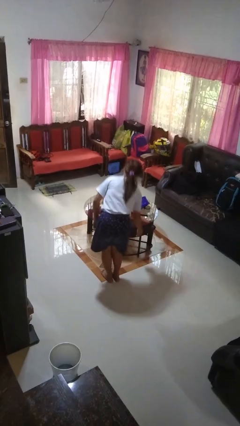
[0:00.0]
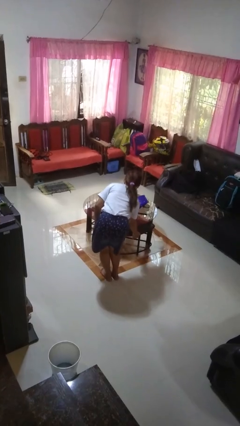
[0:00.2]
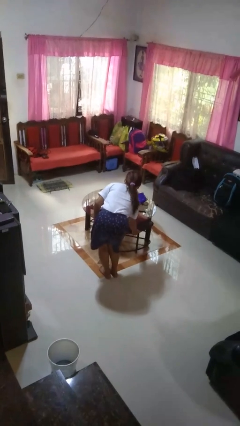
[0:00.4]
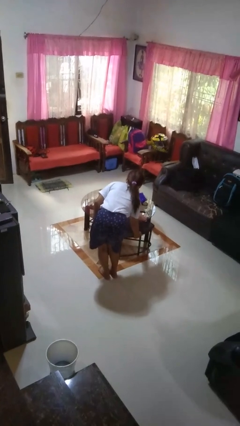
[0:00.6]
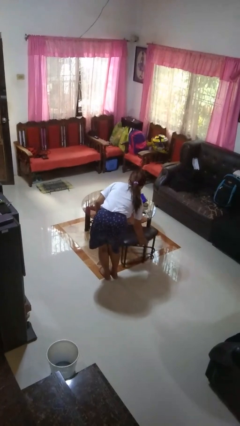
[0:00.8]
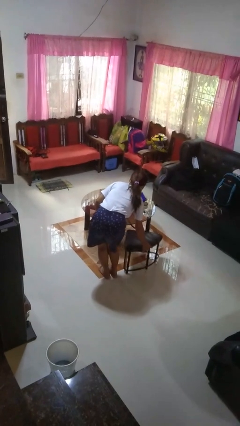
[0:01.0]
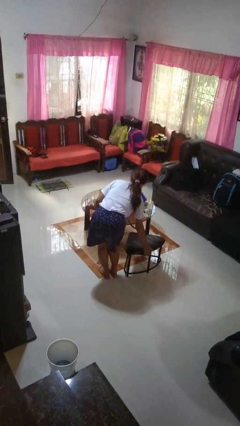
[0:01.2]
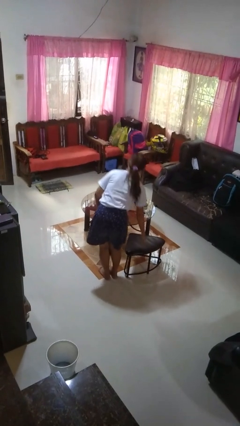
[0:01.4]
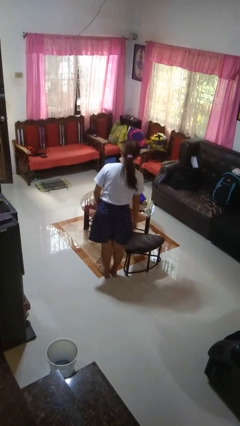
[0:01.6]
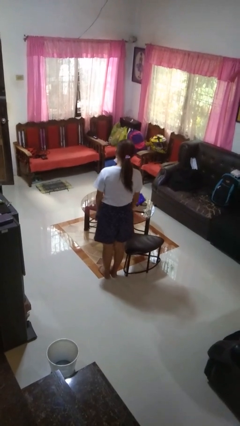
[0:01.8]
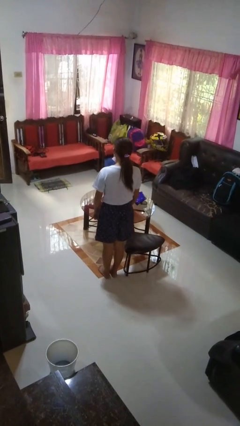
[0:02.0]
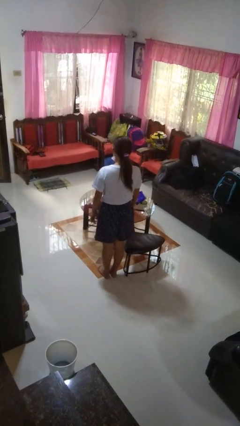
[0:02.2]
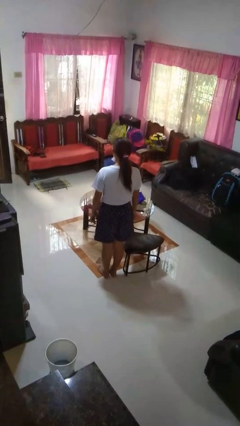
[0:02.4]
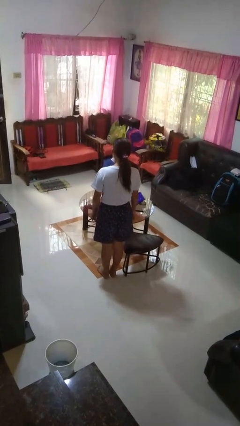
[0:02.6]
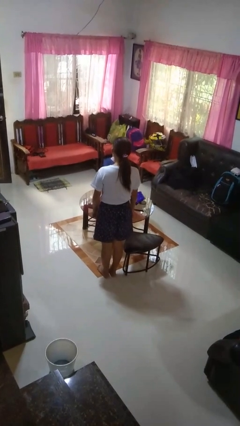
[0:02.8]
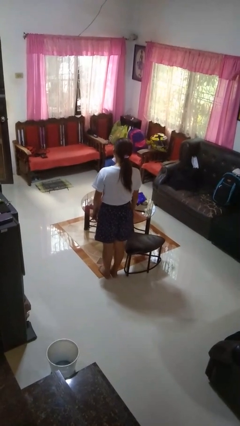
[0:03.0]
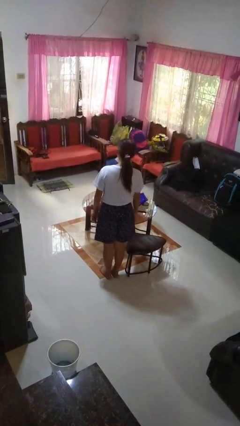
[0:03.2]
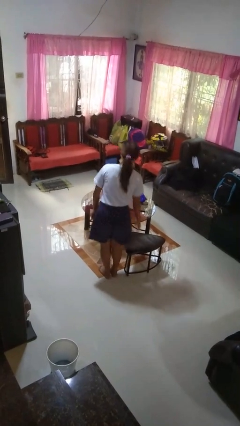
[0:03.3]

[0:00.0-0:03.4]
person pulls out chair

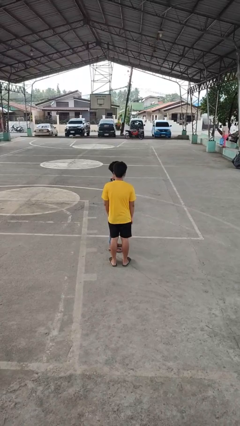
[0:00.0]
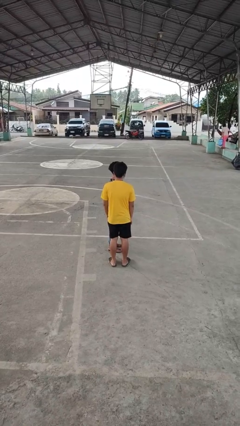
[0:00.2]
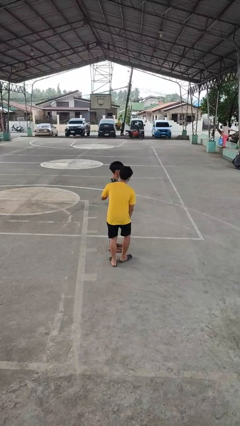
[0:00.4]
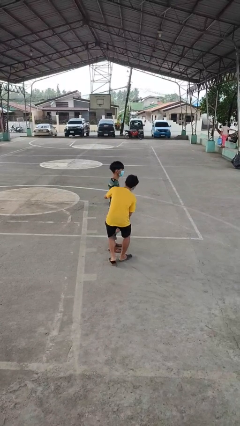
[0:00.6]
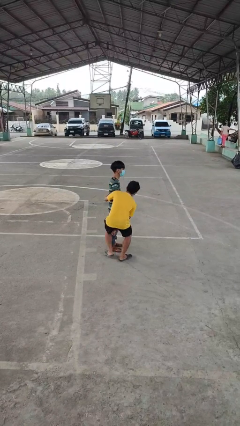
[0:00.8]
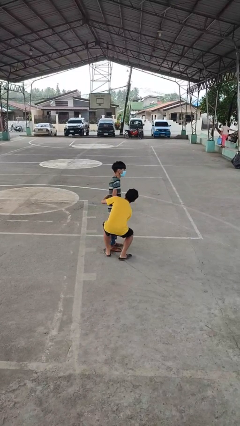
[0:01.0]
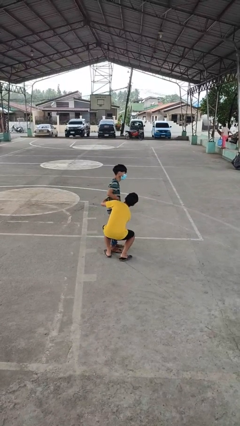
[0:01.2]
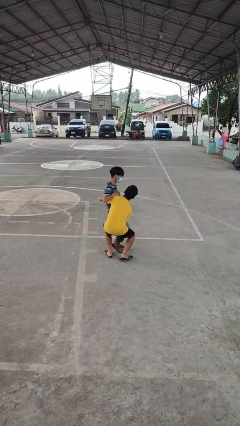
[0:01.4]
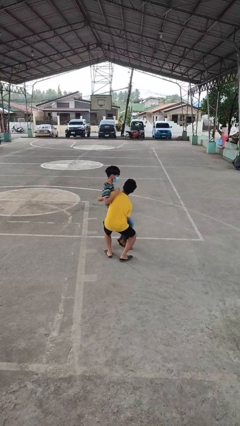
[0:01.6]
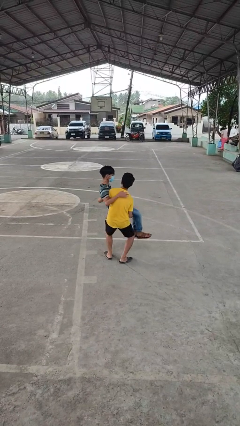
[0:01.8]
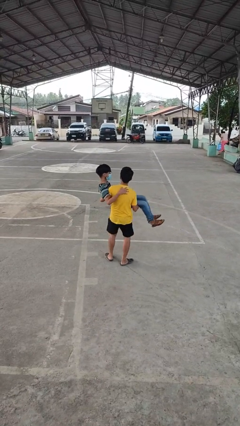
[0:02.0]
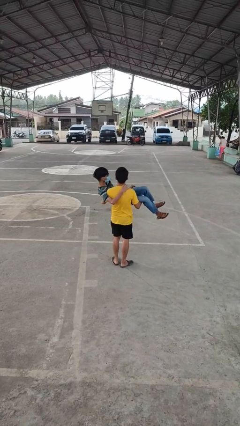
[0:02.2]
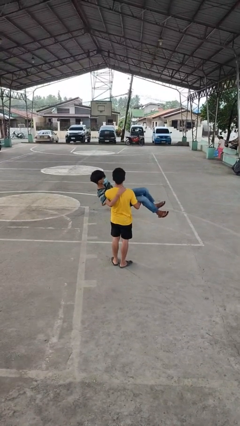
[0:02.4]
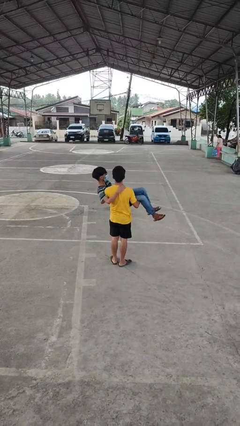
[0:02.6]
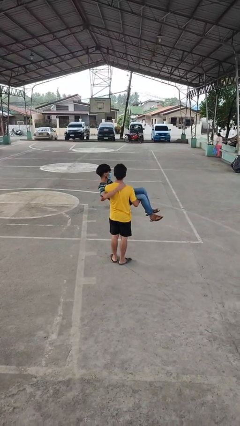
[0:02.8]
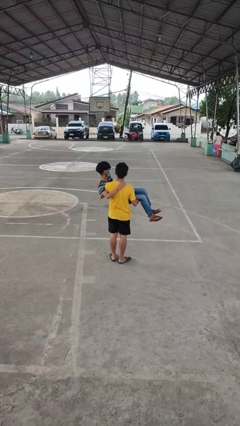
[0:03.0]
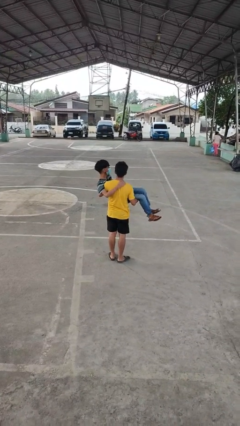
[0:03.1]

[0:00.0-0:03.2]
person picks up person

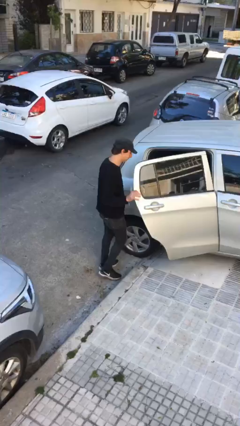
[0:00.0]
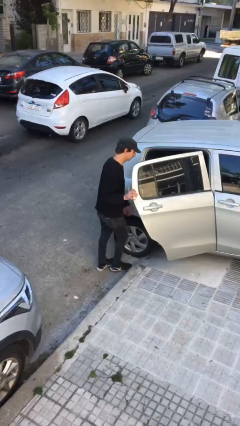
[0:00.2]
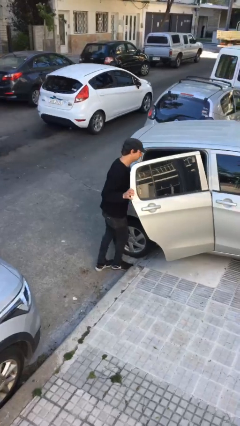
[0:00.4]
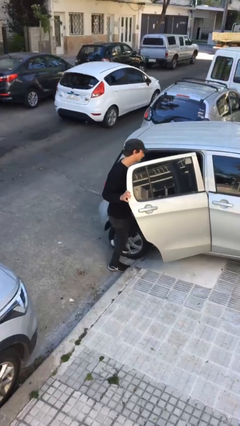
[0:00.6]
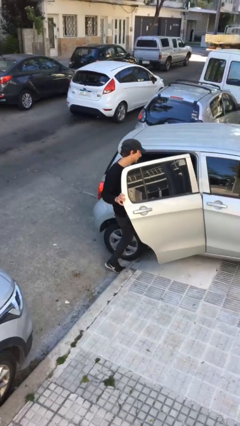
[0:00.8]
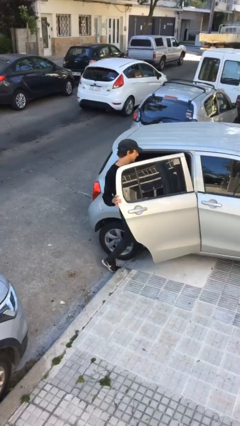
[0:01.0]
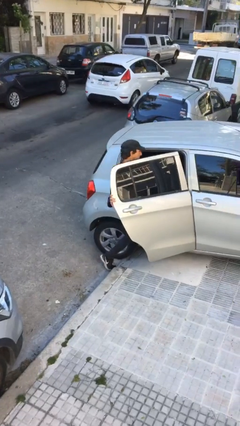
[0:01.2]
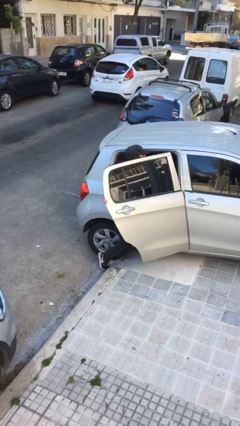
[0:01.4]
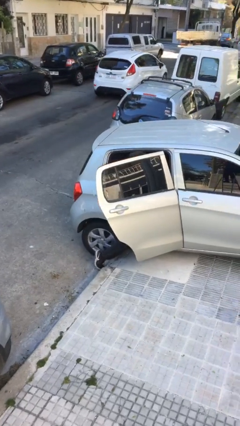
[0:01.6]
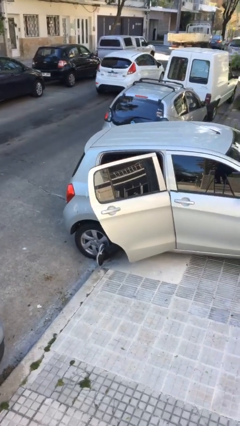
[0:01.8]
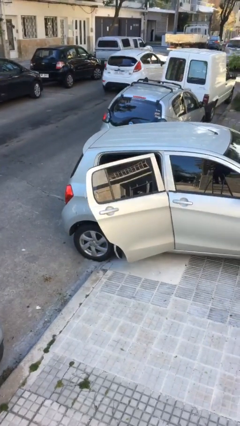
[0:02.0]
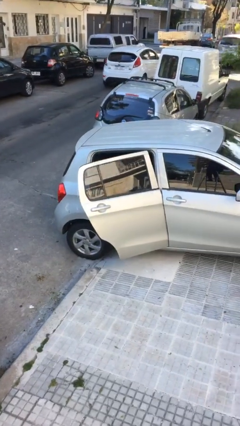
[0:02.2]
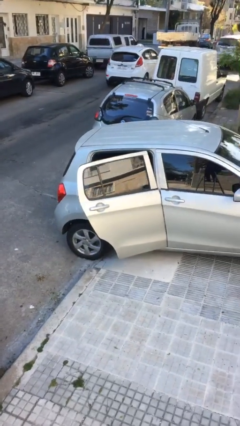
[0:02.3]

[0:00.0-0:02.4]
person enters car

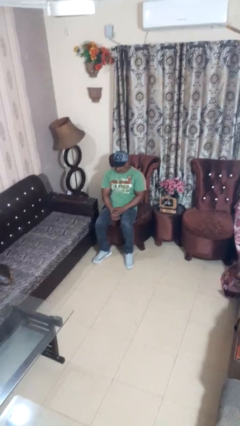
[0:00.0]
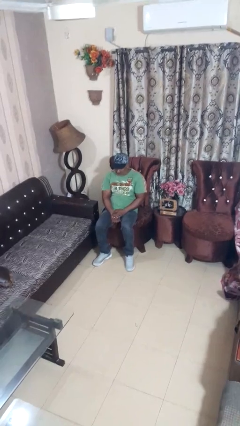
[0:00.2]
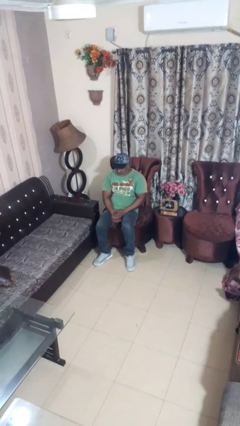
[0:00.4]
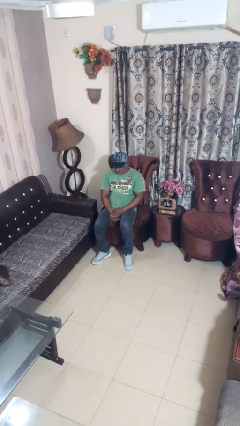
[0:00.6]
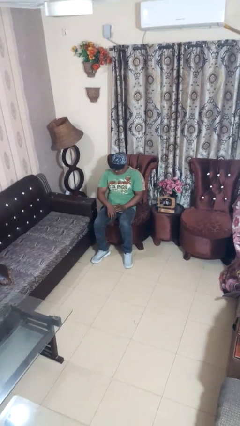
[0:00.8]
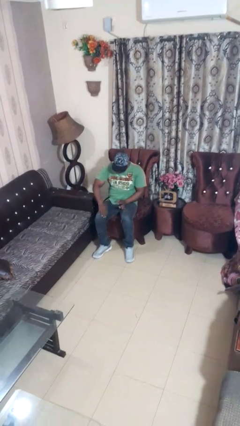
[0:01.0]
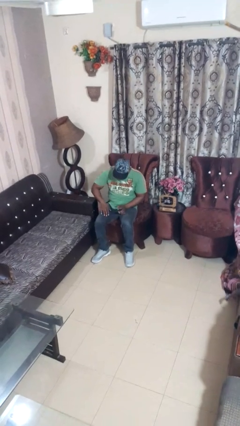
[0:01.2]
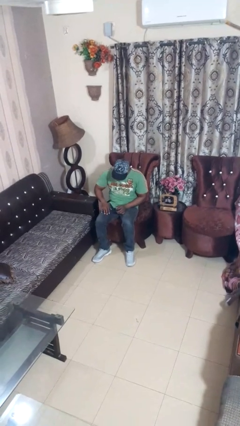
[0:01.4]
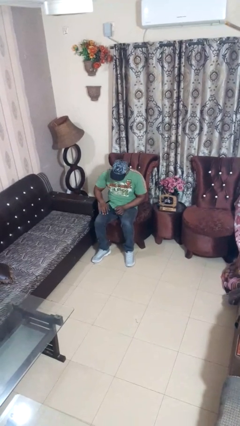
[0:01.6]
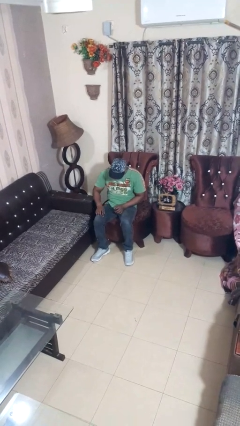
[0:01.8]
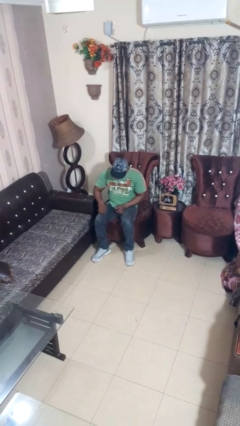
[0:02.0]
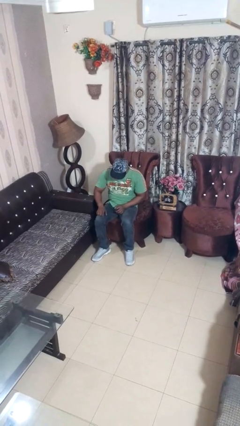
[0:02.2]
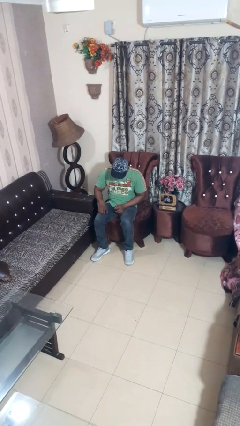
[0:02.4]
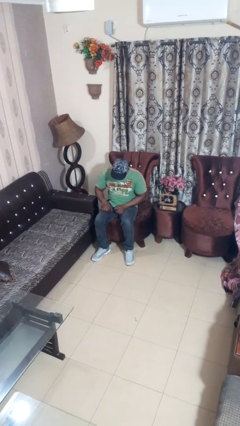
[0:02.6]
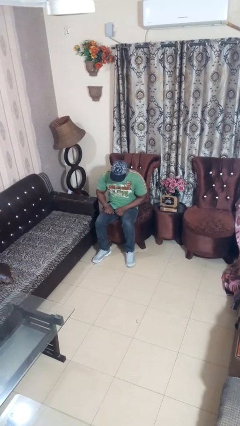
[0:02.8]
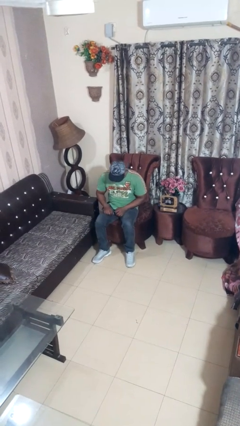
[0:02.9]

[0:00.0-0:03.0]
person swats bug

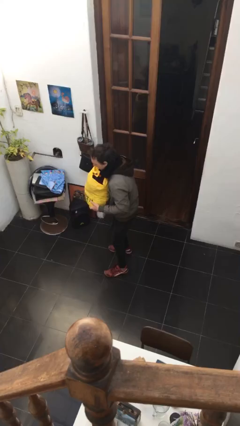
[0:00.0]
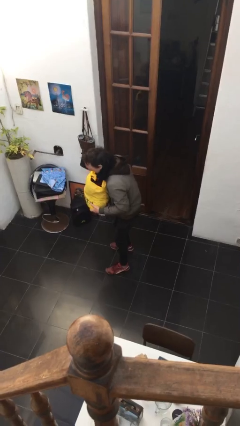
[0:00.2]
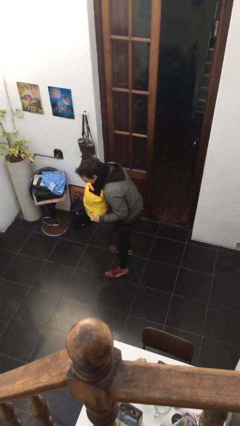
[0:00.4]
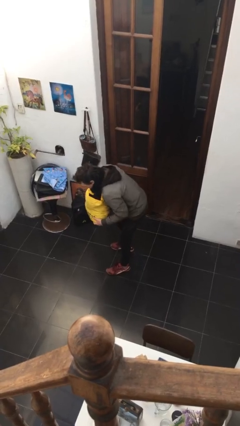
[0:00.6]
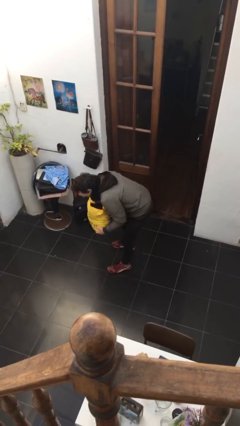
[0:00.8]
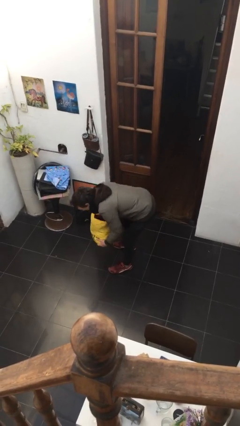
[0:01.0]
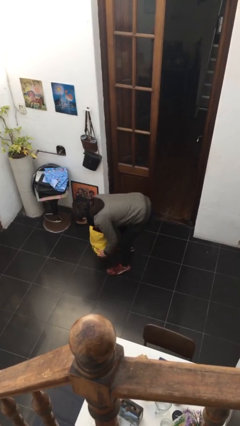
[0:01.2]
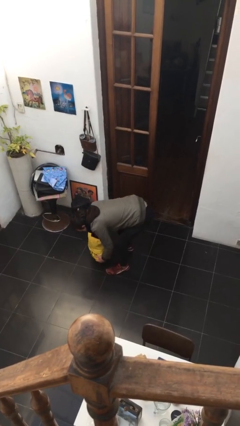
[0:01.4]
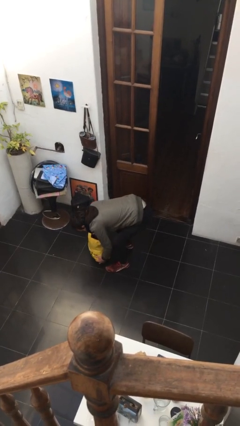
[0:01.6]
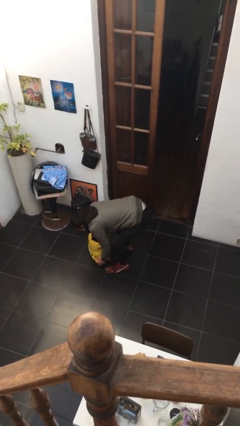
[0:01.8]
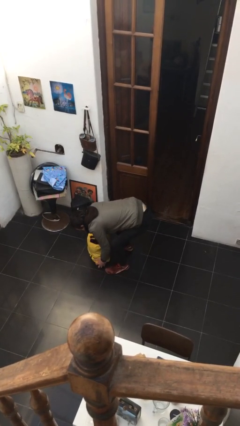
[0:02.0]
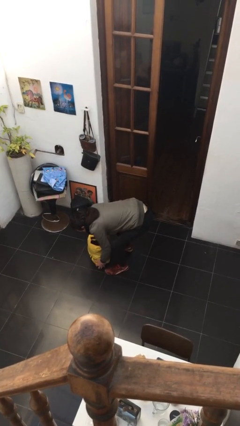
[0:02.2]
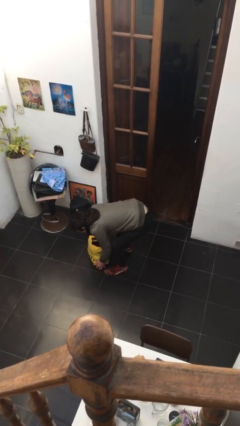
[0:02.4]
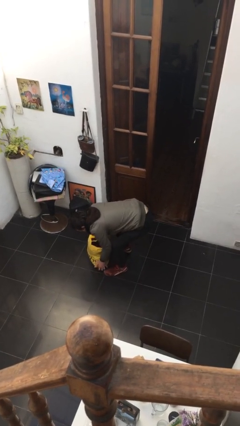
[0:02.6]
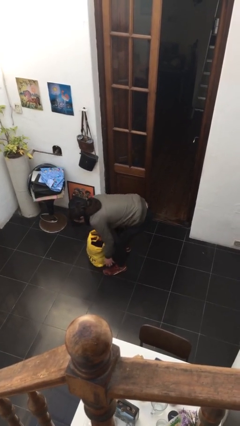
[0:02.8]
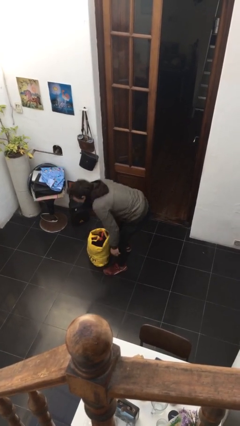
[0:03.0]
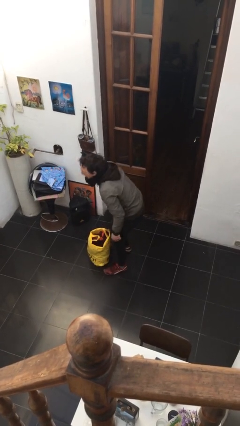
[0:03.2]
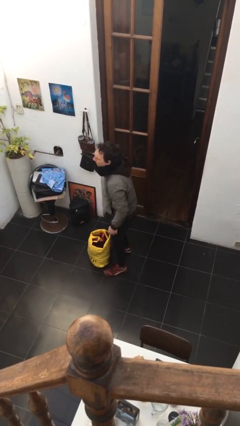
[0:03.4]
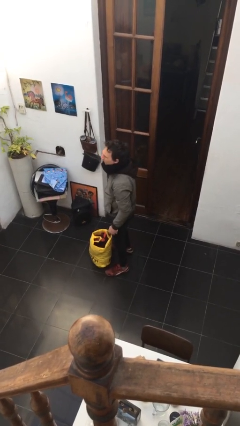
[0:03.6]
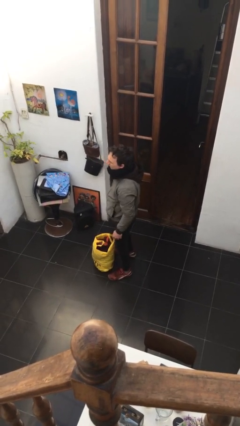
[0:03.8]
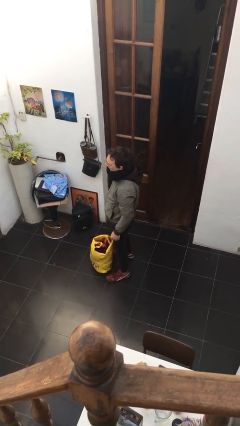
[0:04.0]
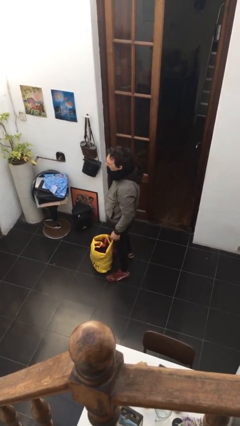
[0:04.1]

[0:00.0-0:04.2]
person puts down object on floor

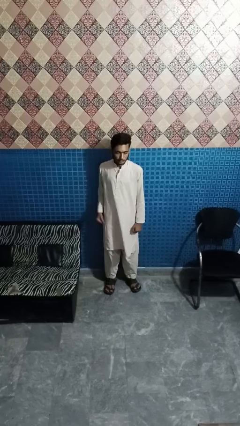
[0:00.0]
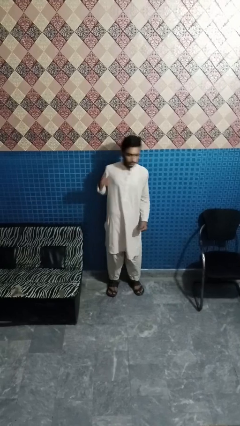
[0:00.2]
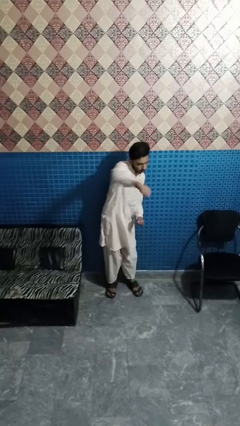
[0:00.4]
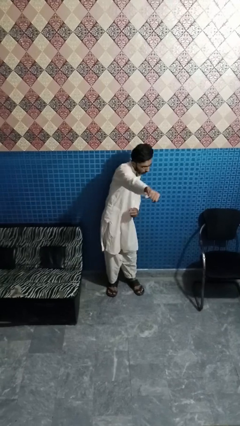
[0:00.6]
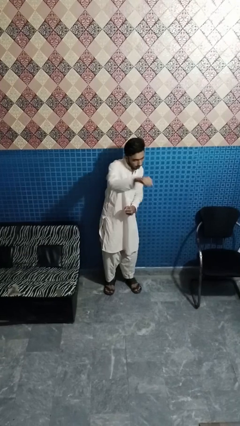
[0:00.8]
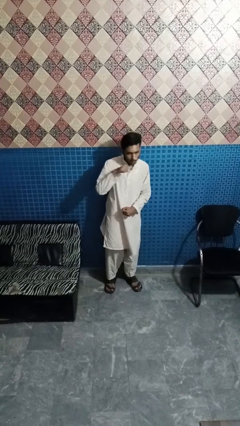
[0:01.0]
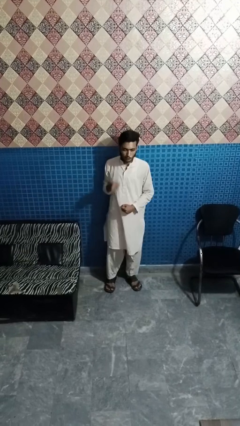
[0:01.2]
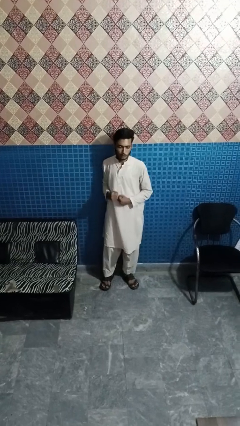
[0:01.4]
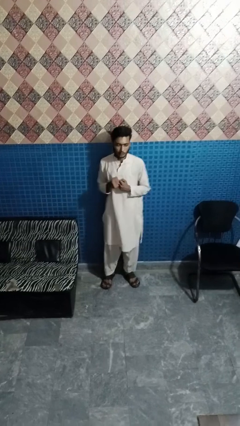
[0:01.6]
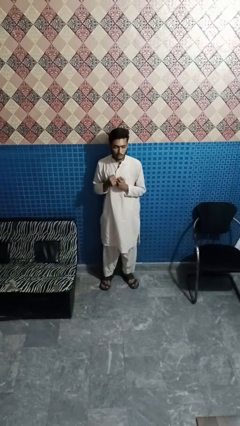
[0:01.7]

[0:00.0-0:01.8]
person punches
